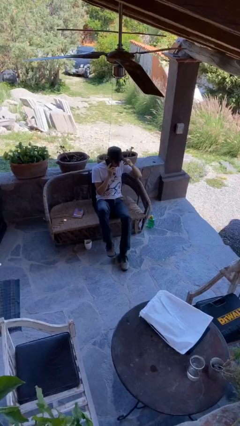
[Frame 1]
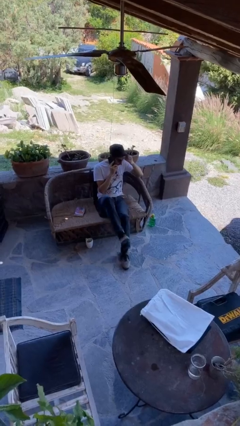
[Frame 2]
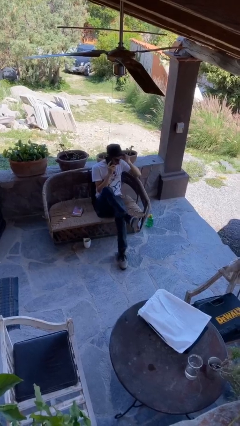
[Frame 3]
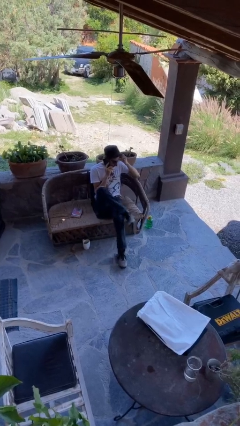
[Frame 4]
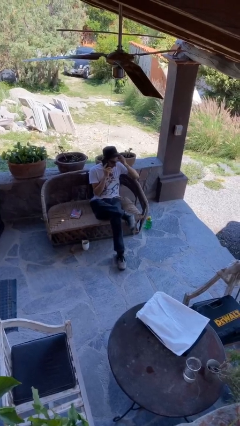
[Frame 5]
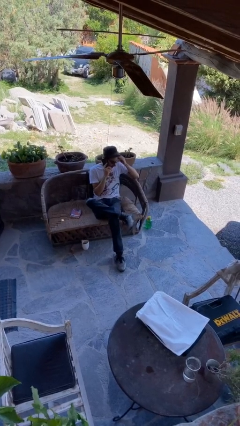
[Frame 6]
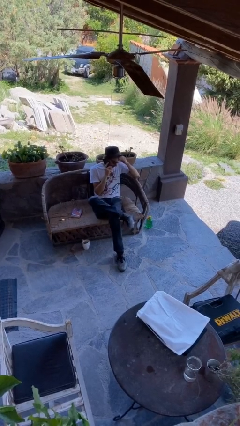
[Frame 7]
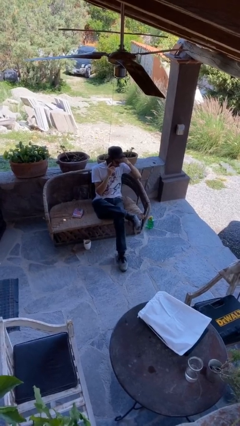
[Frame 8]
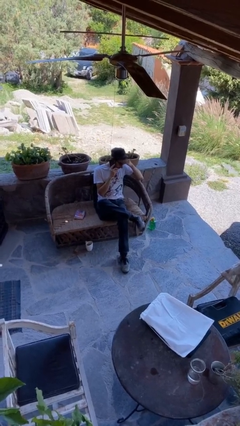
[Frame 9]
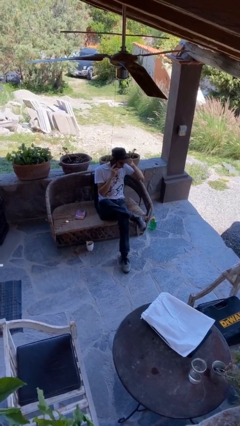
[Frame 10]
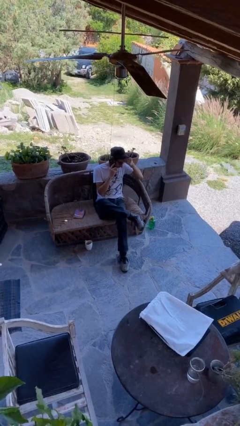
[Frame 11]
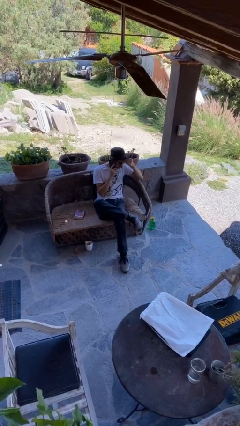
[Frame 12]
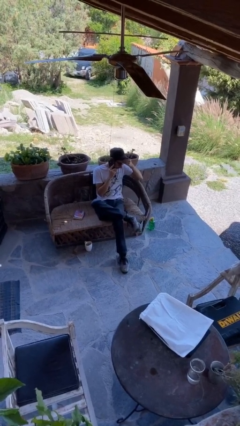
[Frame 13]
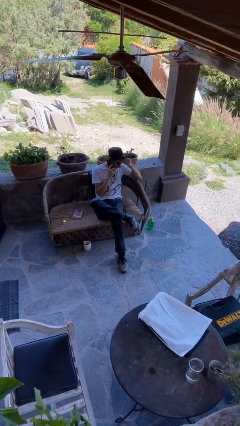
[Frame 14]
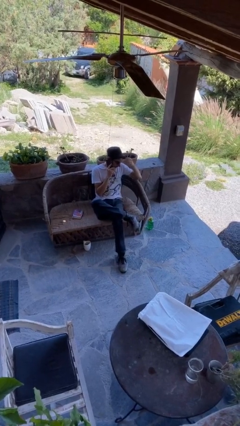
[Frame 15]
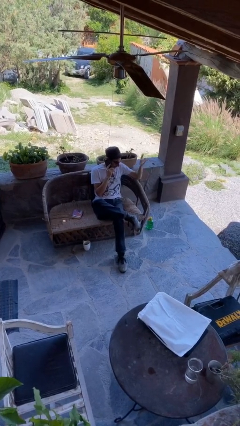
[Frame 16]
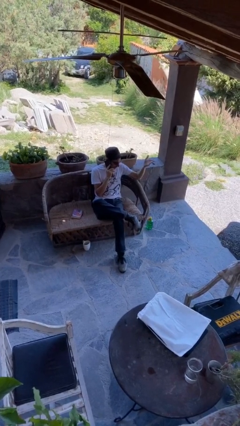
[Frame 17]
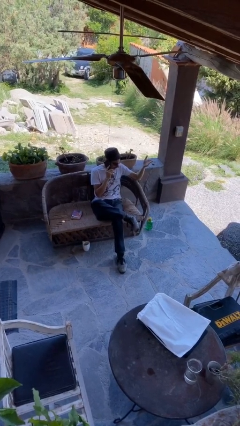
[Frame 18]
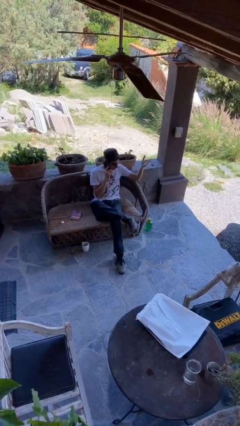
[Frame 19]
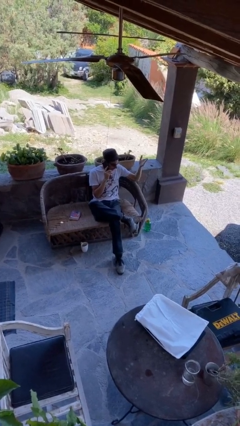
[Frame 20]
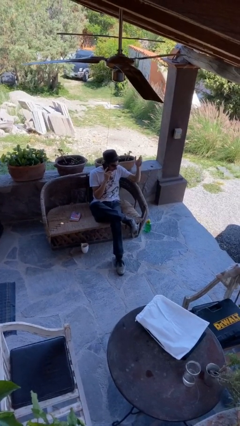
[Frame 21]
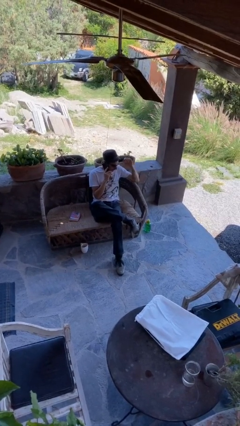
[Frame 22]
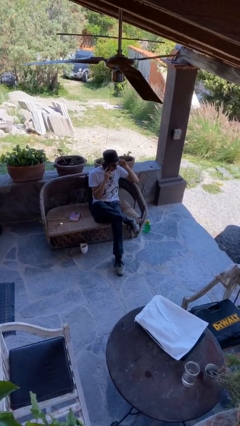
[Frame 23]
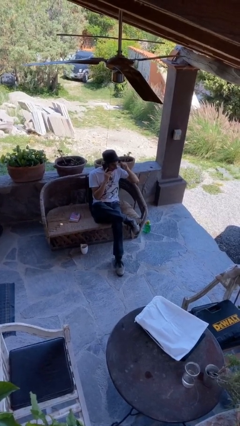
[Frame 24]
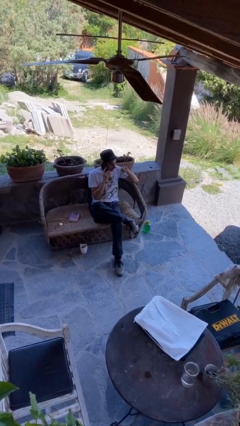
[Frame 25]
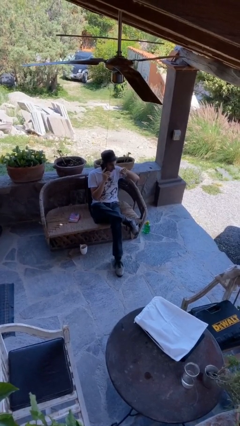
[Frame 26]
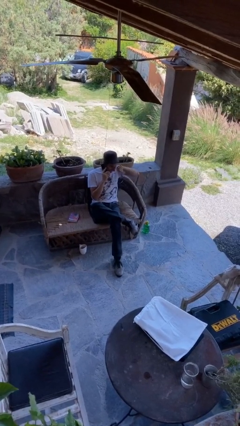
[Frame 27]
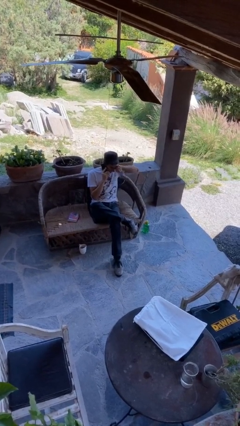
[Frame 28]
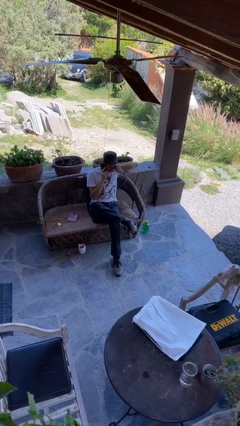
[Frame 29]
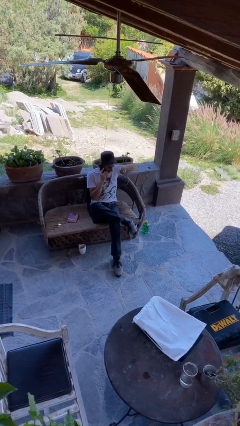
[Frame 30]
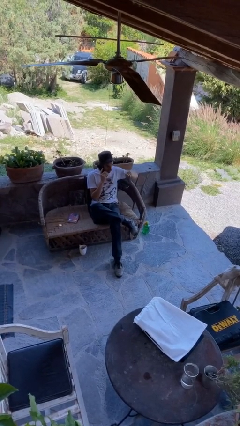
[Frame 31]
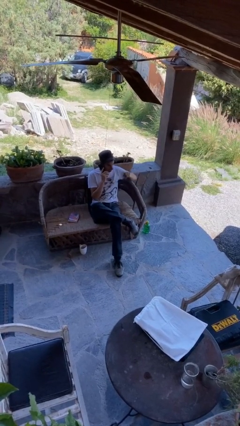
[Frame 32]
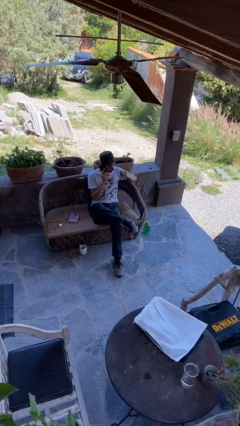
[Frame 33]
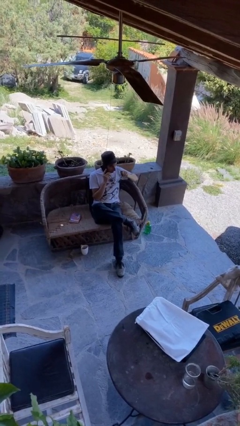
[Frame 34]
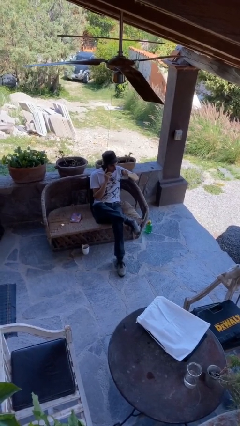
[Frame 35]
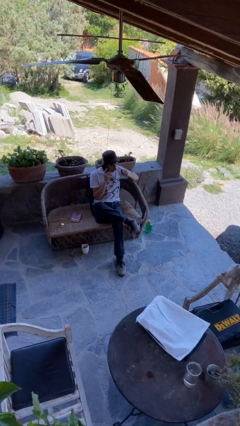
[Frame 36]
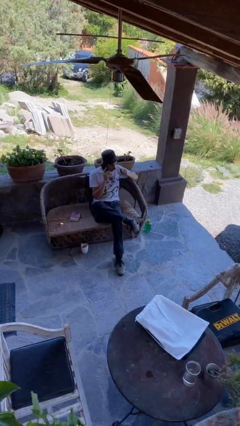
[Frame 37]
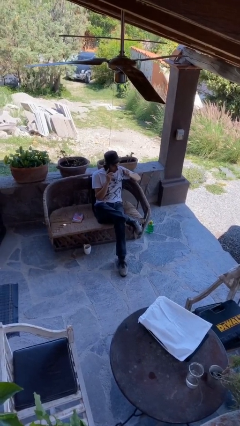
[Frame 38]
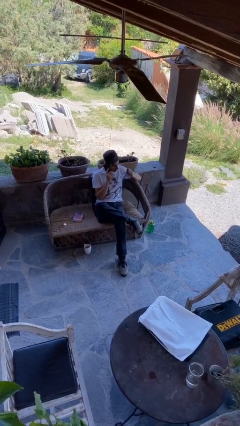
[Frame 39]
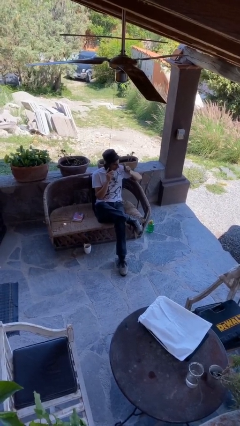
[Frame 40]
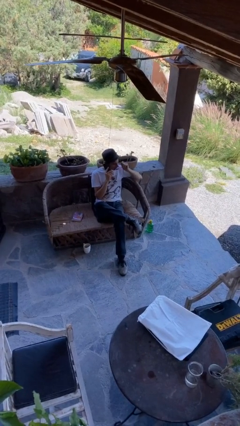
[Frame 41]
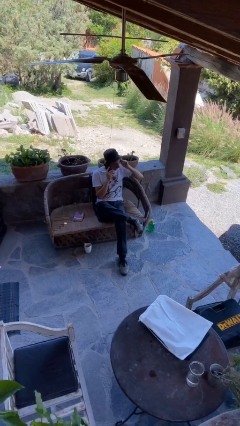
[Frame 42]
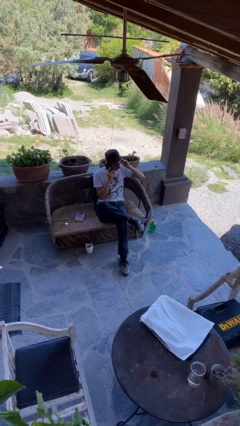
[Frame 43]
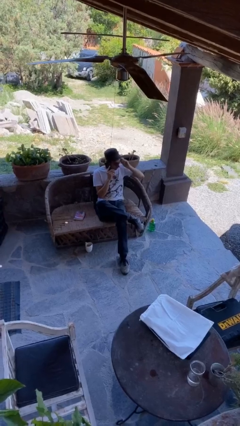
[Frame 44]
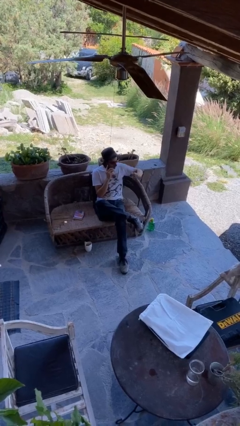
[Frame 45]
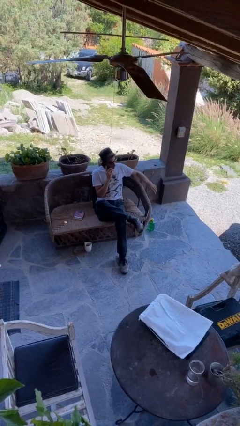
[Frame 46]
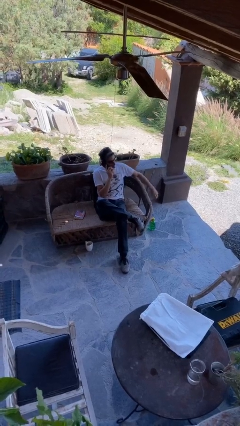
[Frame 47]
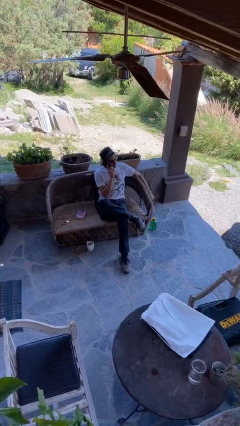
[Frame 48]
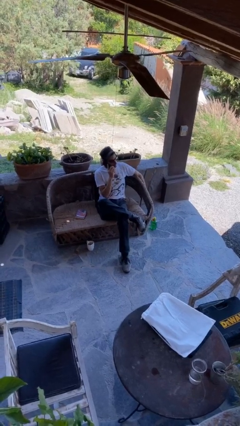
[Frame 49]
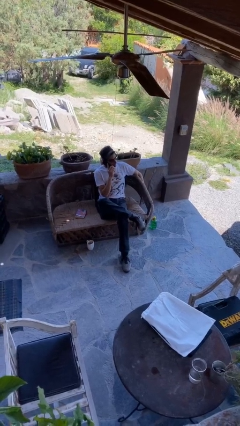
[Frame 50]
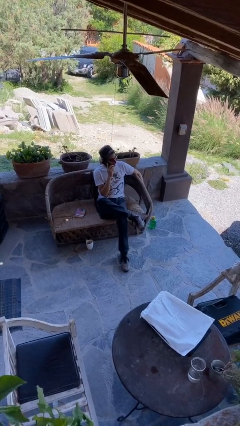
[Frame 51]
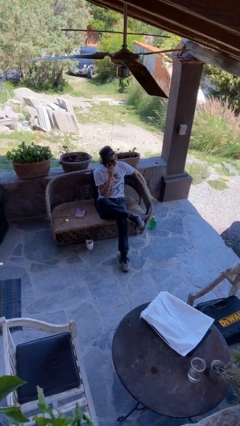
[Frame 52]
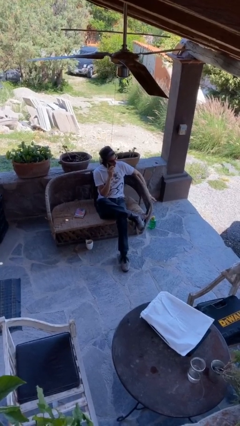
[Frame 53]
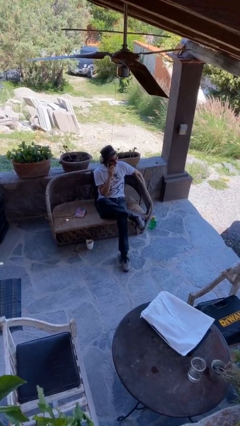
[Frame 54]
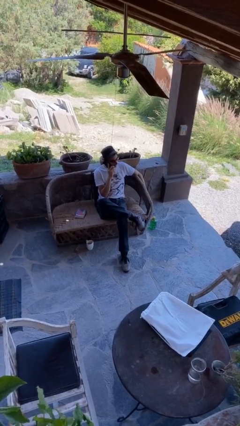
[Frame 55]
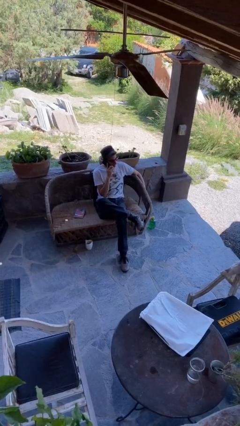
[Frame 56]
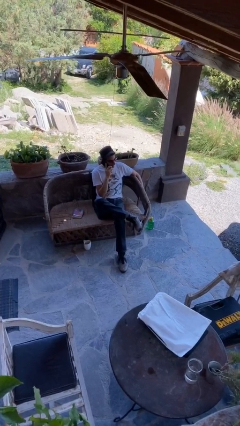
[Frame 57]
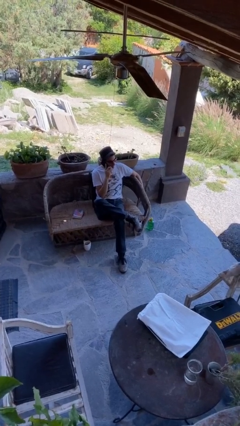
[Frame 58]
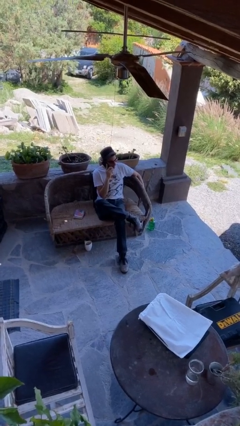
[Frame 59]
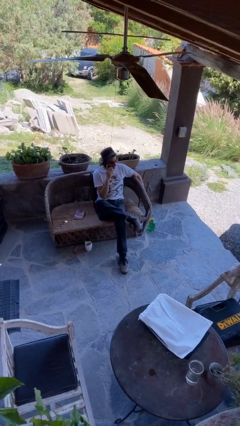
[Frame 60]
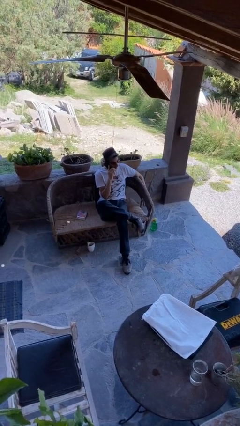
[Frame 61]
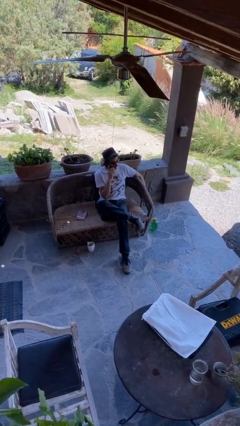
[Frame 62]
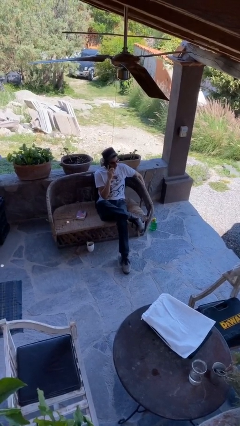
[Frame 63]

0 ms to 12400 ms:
person talks on phone

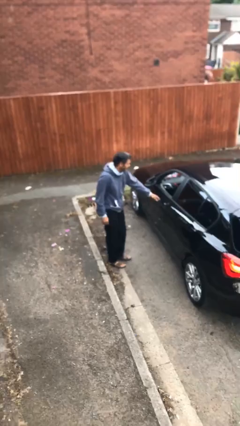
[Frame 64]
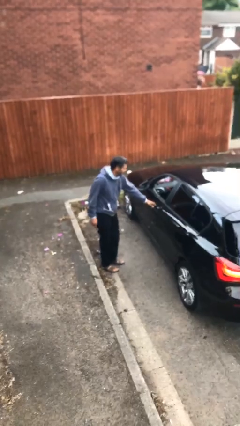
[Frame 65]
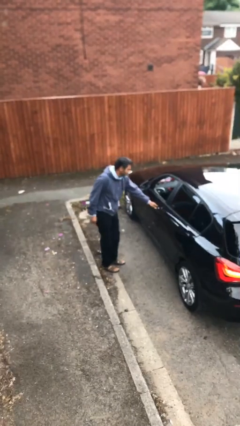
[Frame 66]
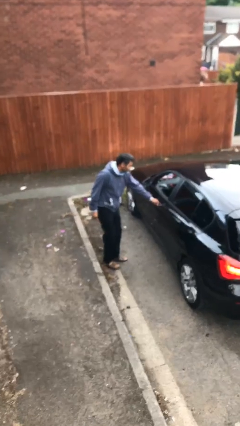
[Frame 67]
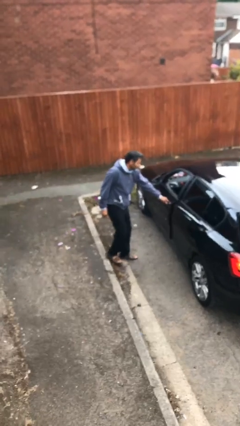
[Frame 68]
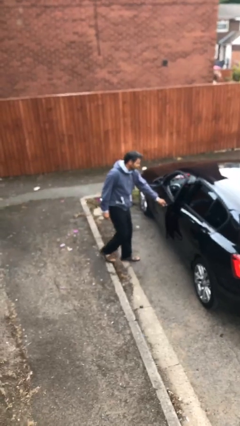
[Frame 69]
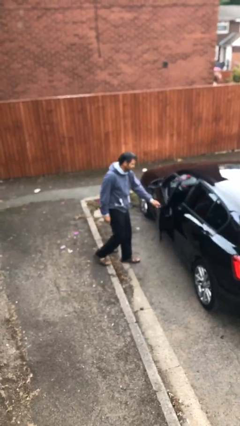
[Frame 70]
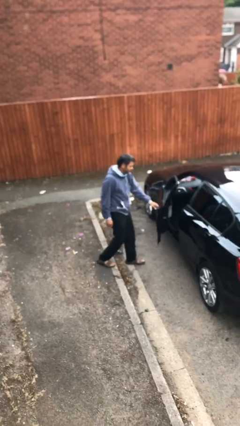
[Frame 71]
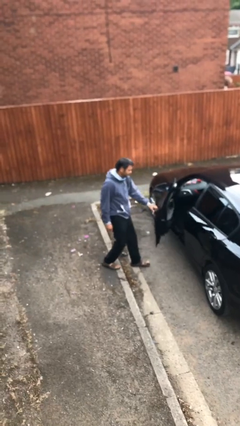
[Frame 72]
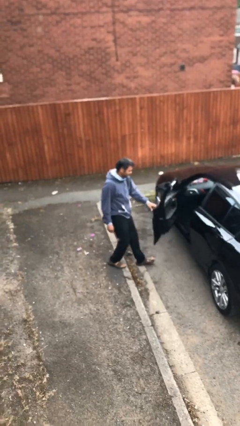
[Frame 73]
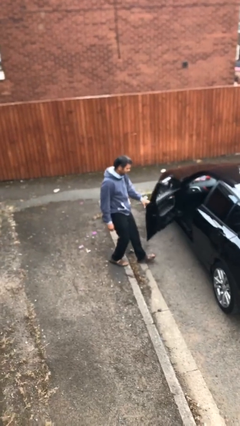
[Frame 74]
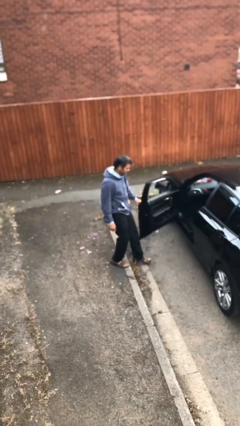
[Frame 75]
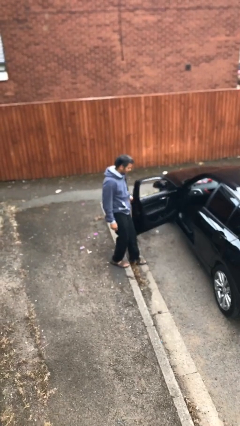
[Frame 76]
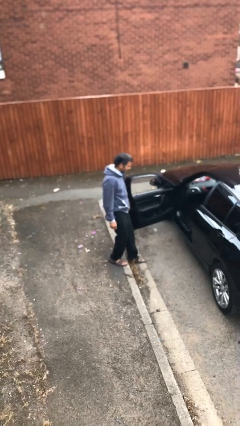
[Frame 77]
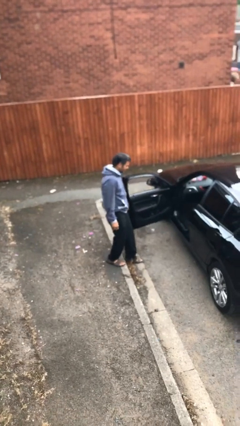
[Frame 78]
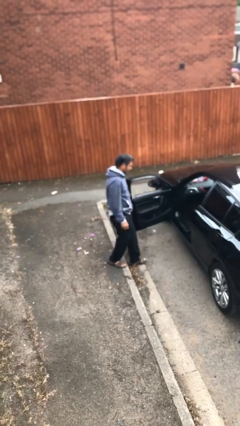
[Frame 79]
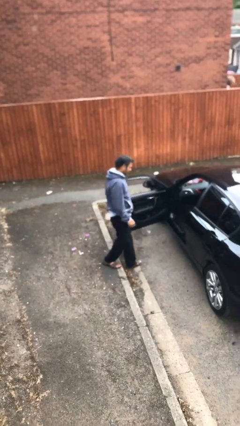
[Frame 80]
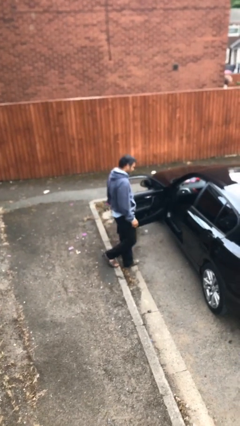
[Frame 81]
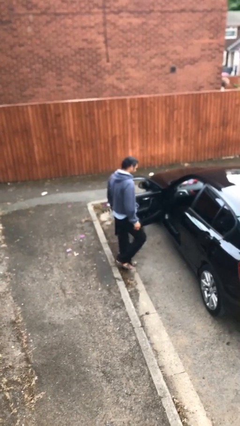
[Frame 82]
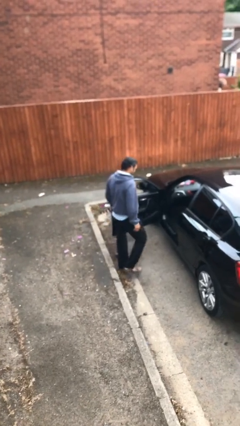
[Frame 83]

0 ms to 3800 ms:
person opens car door

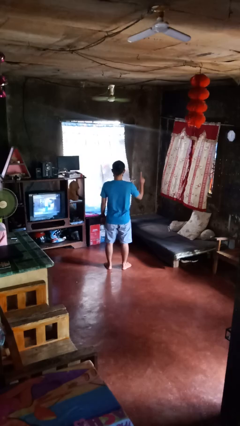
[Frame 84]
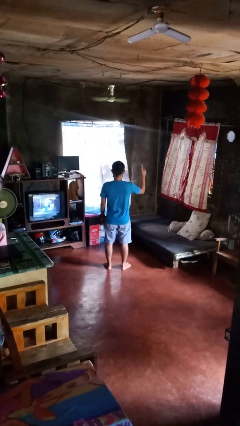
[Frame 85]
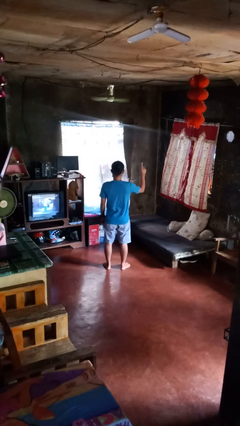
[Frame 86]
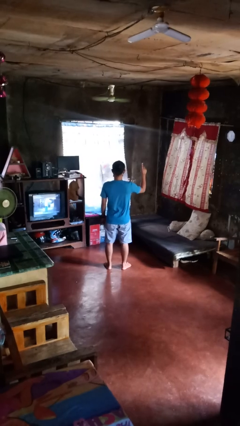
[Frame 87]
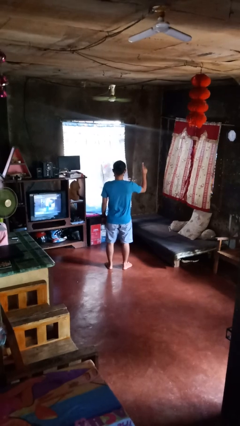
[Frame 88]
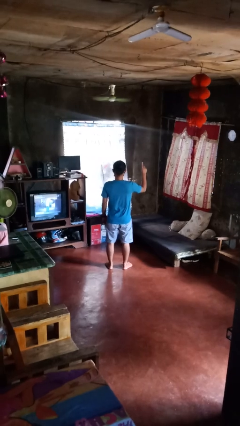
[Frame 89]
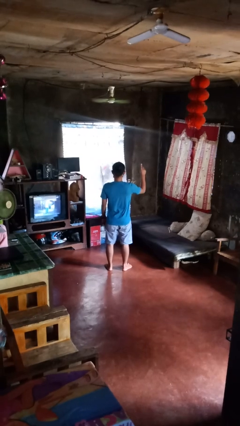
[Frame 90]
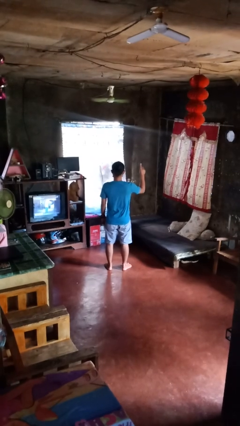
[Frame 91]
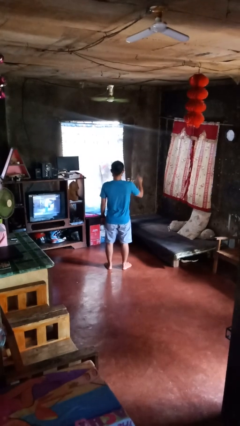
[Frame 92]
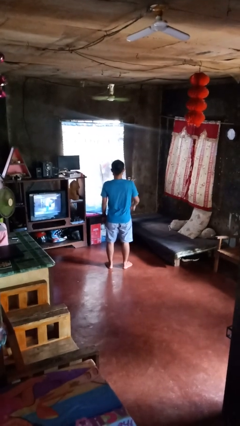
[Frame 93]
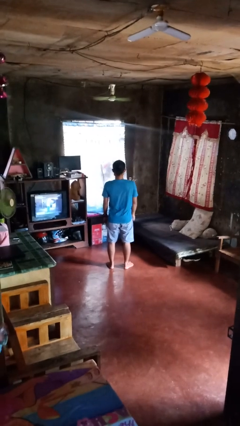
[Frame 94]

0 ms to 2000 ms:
person gestures number one
